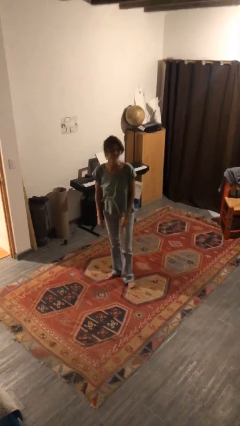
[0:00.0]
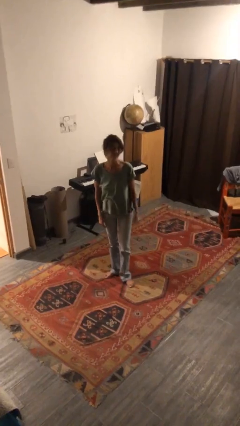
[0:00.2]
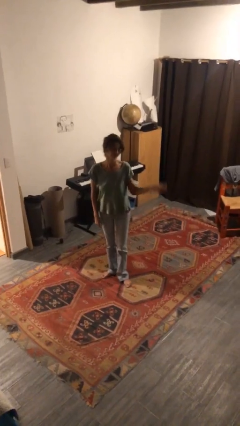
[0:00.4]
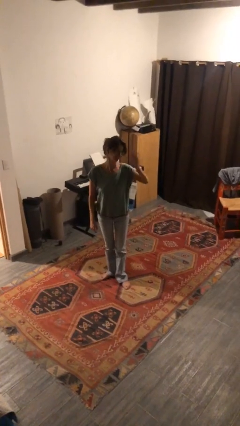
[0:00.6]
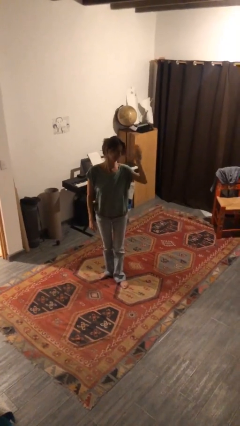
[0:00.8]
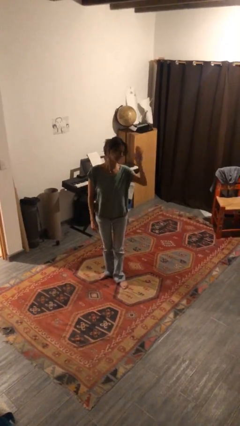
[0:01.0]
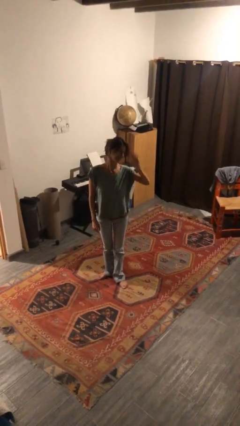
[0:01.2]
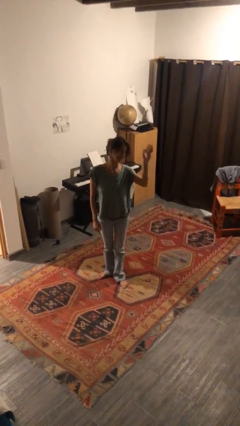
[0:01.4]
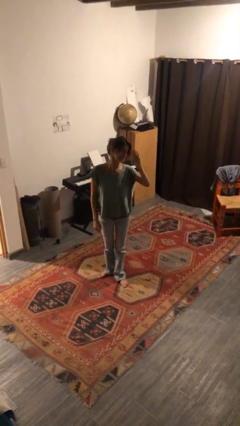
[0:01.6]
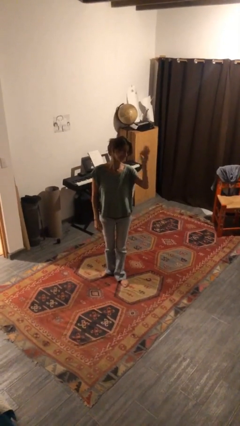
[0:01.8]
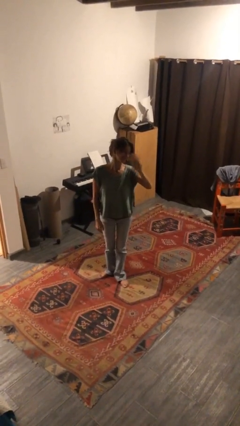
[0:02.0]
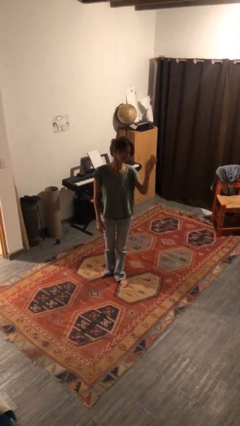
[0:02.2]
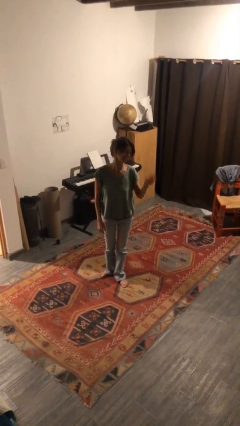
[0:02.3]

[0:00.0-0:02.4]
person waves at person

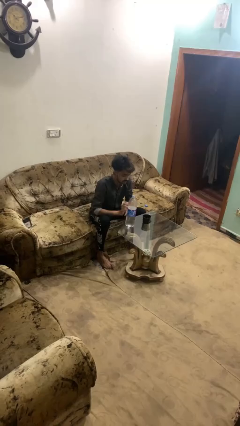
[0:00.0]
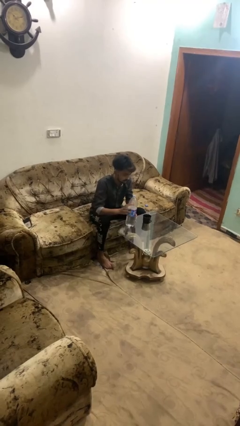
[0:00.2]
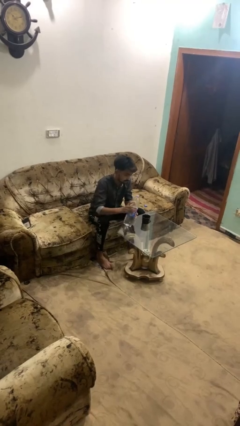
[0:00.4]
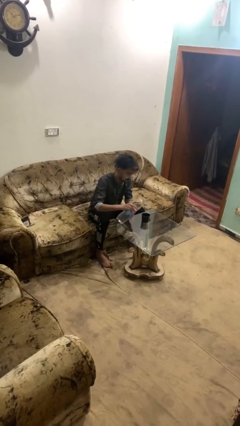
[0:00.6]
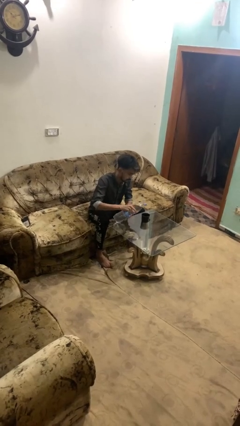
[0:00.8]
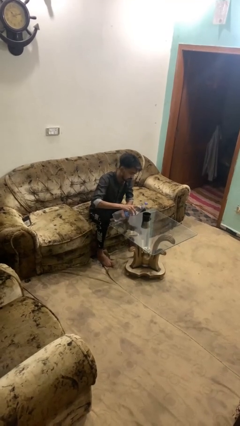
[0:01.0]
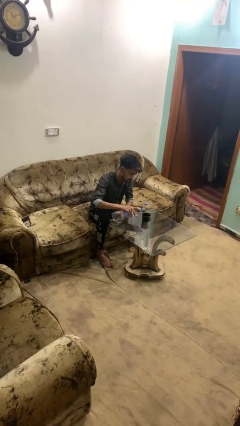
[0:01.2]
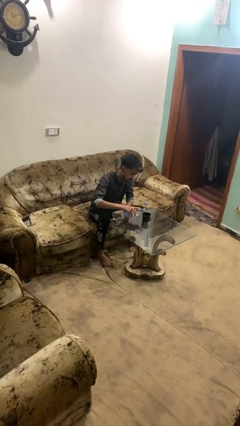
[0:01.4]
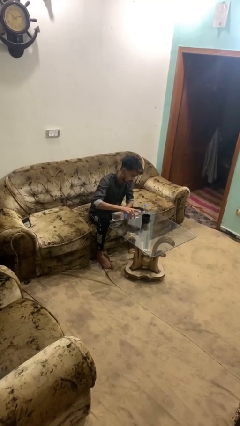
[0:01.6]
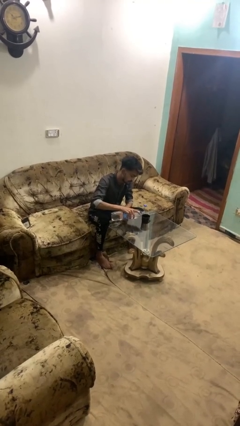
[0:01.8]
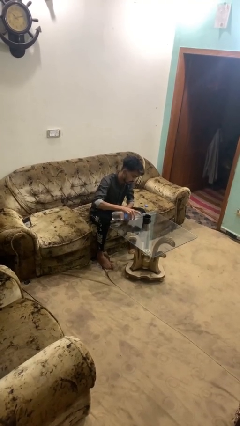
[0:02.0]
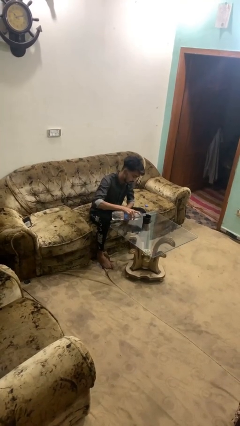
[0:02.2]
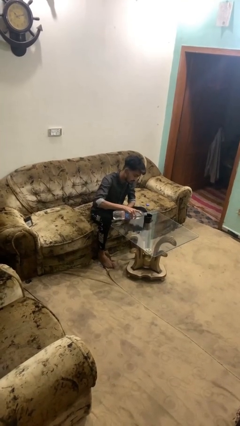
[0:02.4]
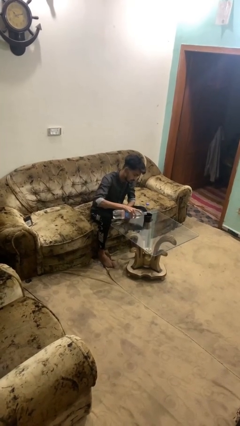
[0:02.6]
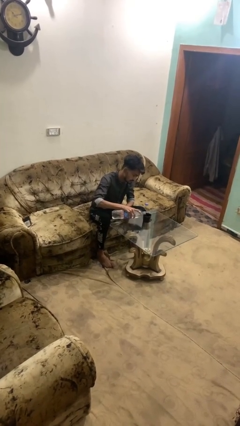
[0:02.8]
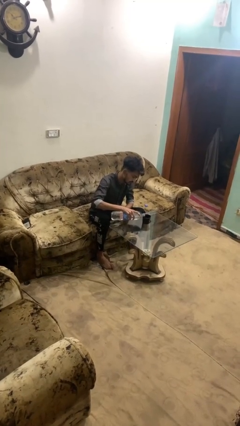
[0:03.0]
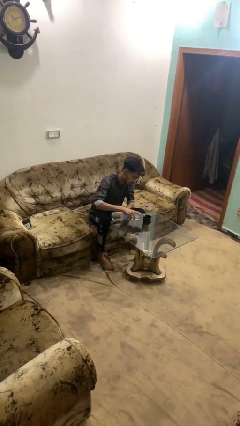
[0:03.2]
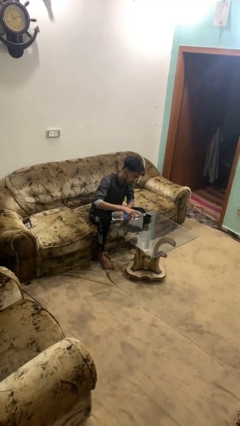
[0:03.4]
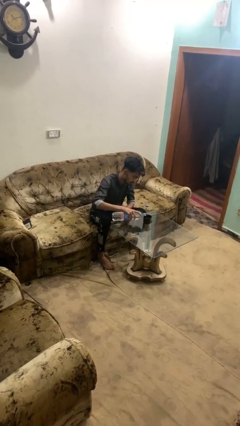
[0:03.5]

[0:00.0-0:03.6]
person pours liquid into cup

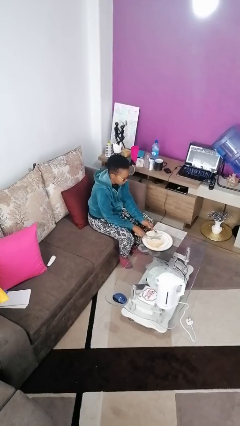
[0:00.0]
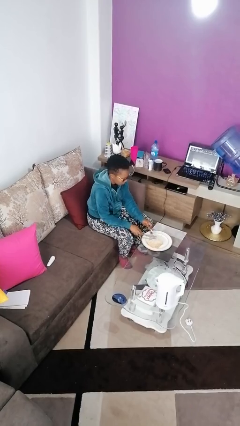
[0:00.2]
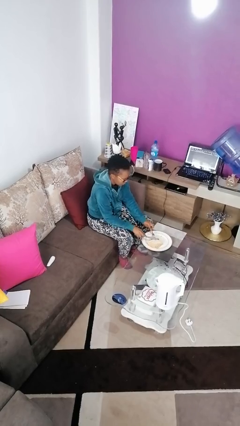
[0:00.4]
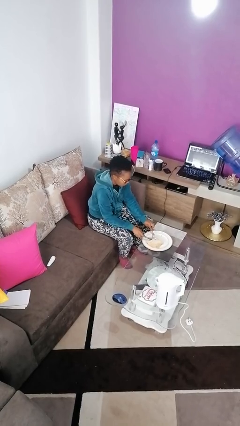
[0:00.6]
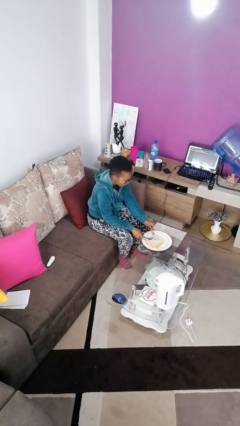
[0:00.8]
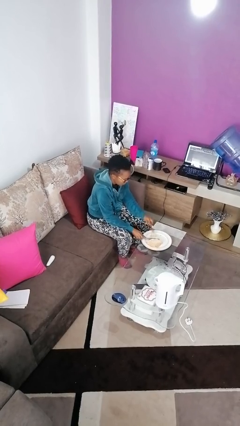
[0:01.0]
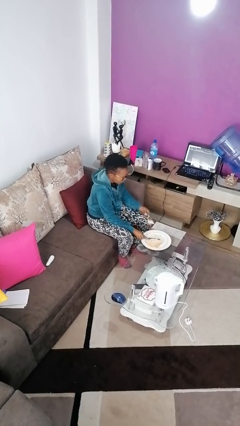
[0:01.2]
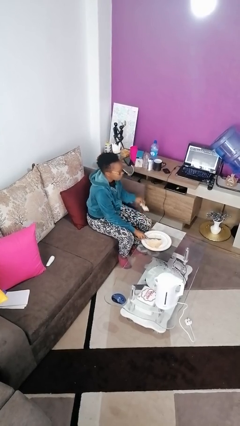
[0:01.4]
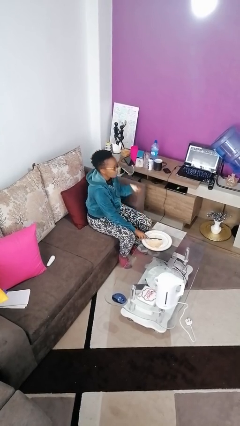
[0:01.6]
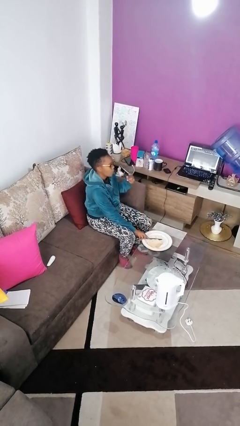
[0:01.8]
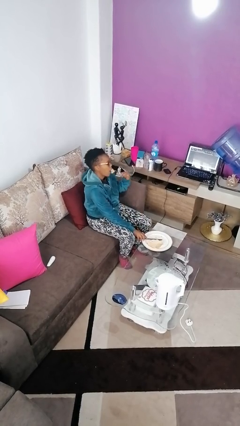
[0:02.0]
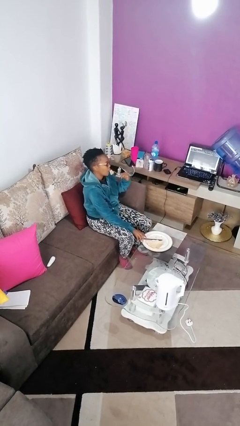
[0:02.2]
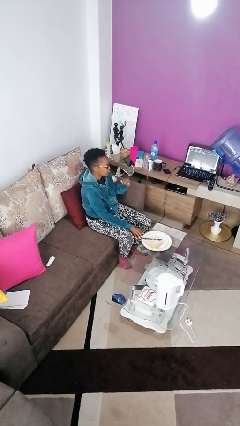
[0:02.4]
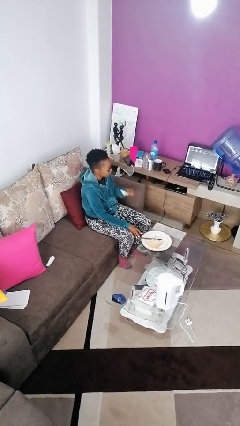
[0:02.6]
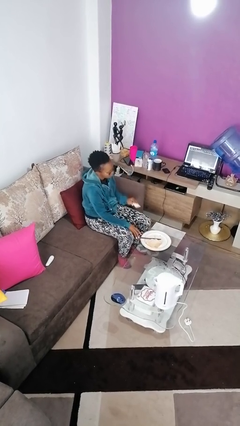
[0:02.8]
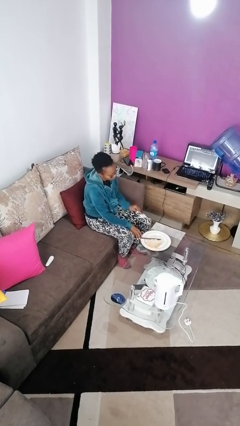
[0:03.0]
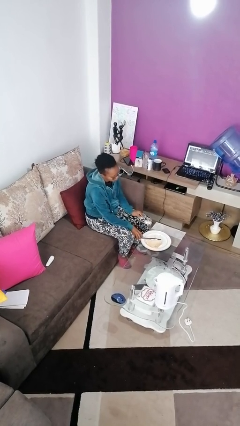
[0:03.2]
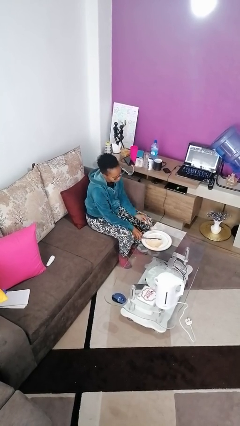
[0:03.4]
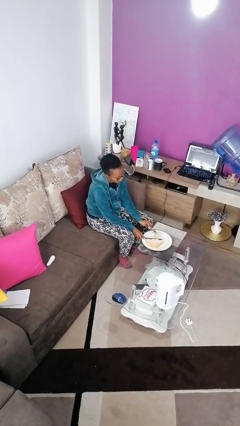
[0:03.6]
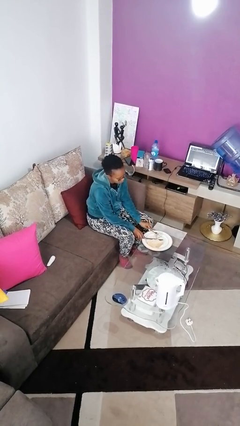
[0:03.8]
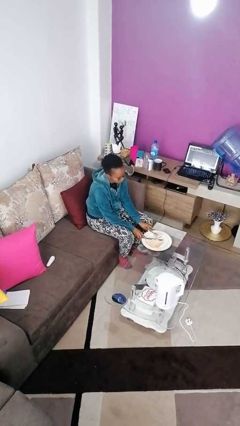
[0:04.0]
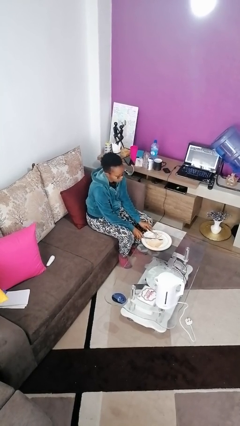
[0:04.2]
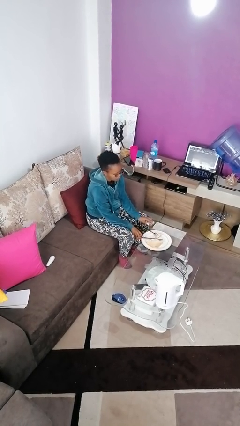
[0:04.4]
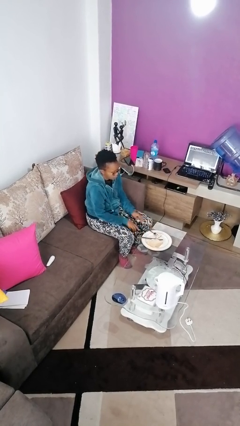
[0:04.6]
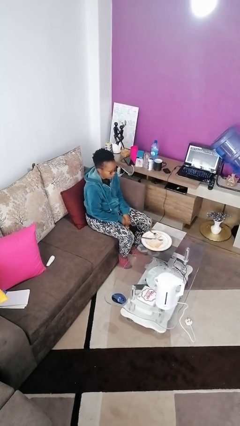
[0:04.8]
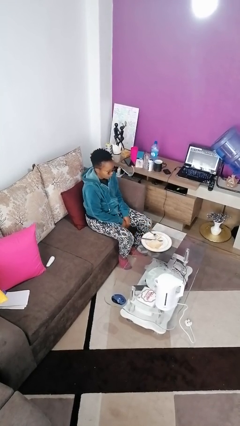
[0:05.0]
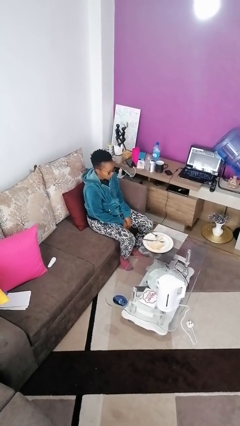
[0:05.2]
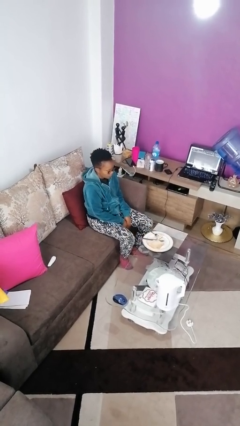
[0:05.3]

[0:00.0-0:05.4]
person eats with utensil

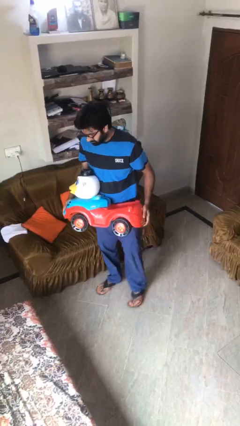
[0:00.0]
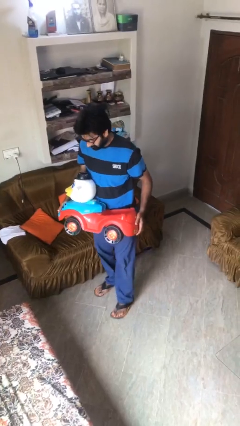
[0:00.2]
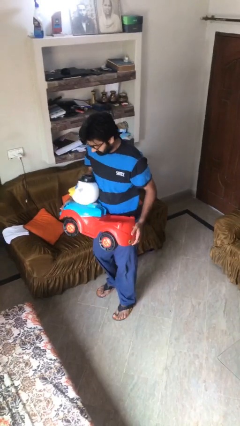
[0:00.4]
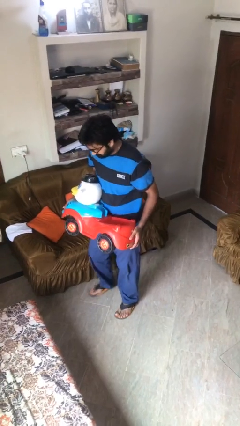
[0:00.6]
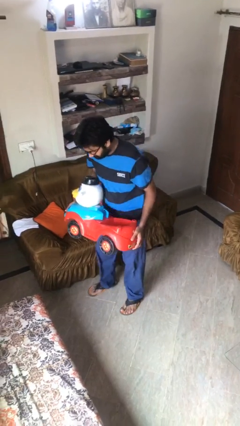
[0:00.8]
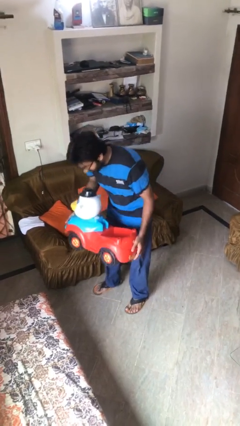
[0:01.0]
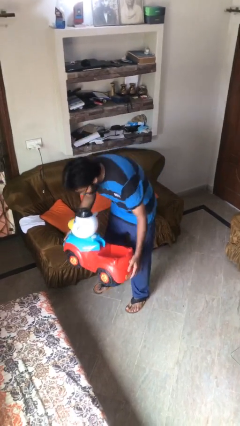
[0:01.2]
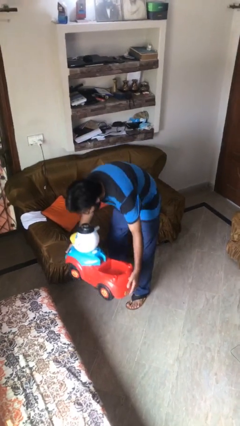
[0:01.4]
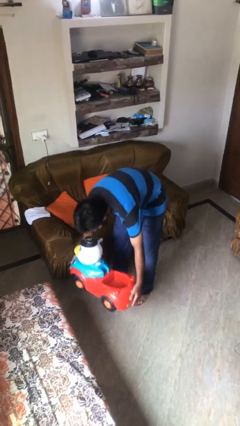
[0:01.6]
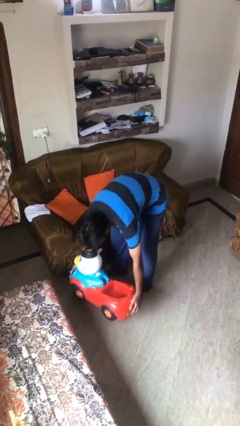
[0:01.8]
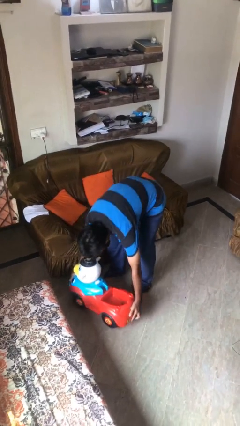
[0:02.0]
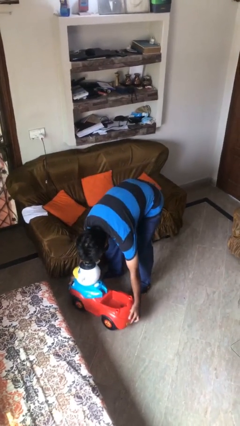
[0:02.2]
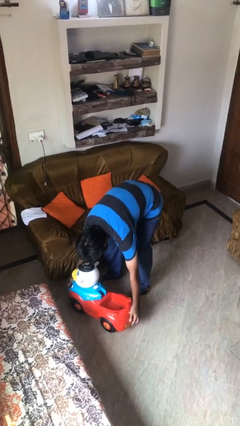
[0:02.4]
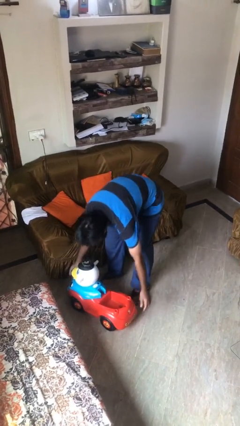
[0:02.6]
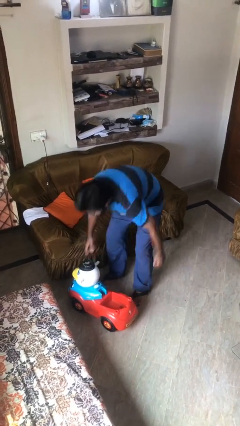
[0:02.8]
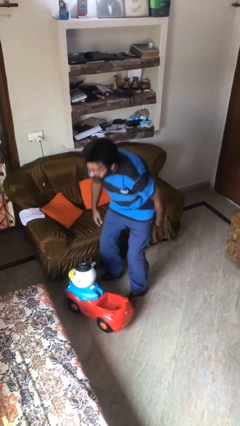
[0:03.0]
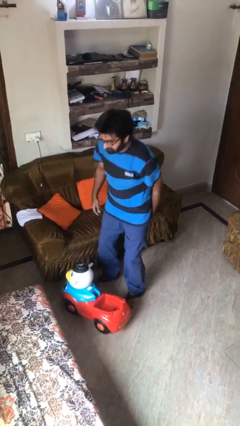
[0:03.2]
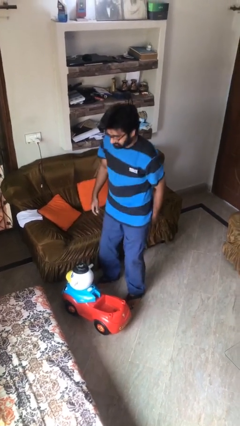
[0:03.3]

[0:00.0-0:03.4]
person puts down object on floor

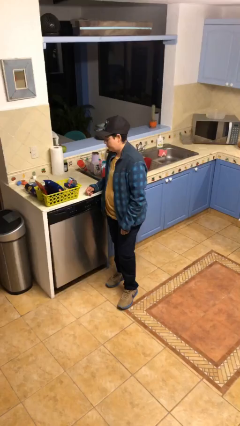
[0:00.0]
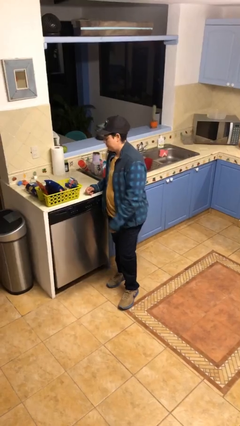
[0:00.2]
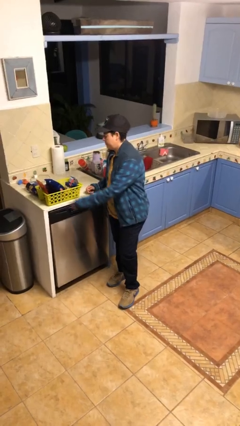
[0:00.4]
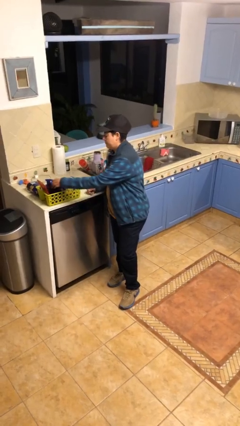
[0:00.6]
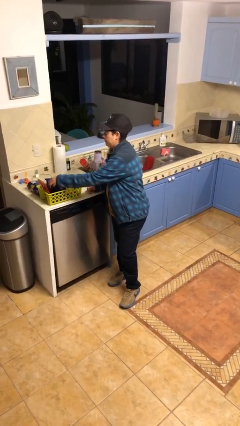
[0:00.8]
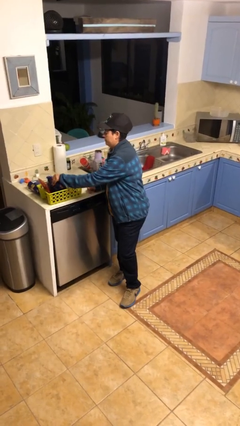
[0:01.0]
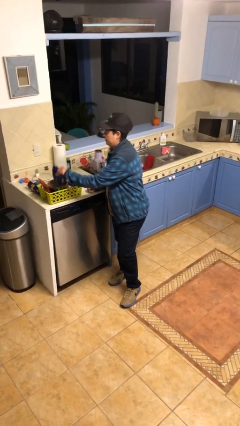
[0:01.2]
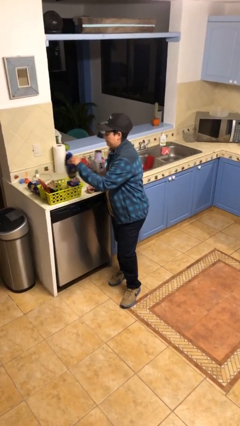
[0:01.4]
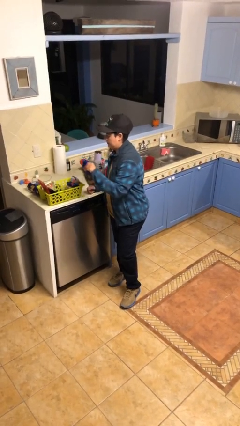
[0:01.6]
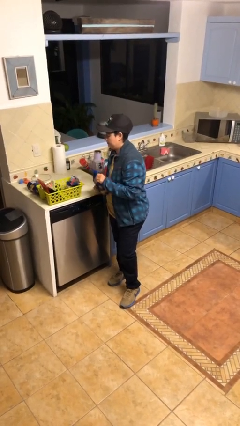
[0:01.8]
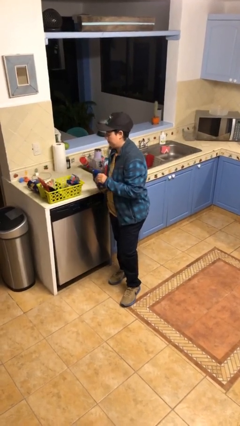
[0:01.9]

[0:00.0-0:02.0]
person takes object from basket

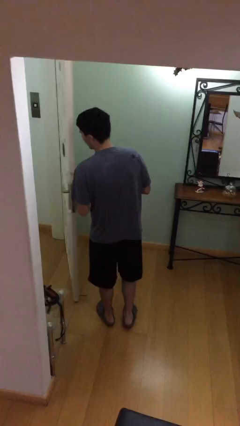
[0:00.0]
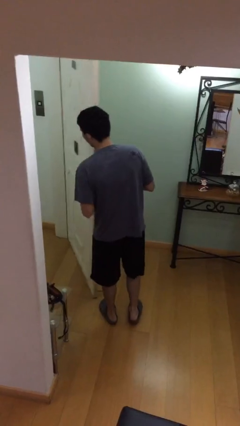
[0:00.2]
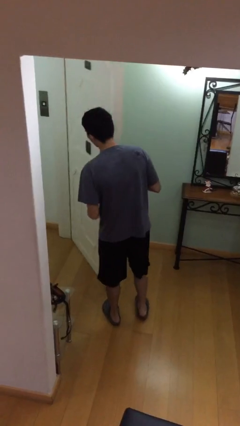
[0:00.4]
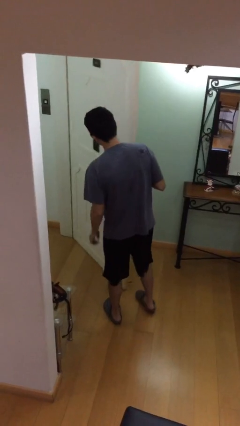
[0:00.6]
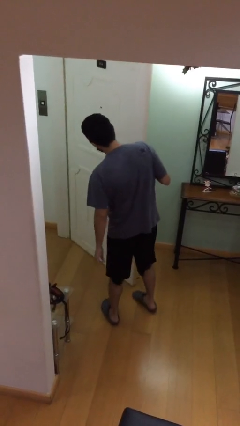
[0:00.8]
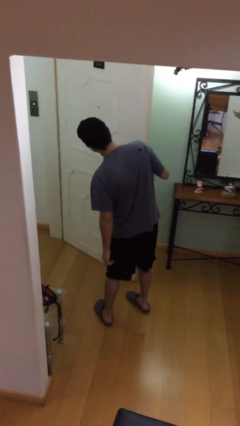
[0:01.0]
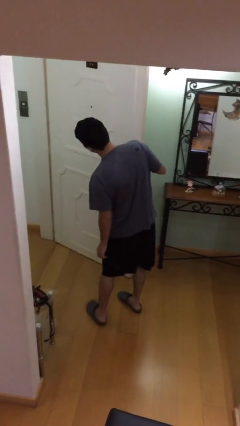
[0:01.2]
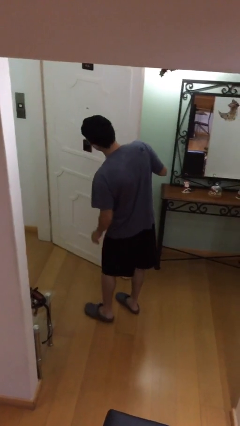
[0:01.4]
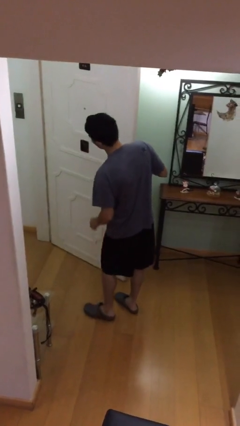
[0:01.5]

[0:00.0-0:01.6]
person opens facility door
